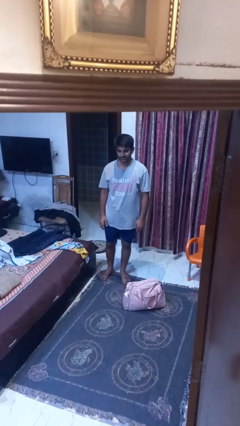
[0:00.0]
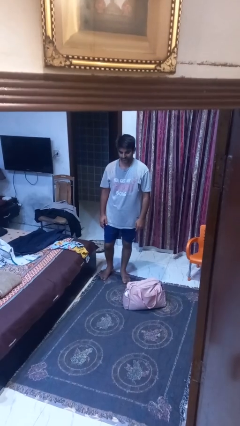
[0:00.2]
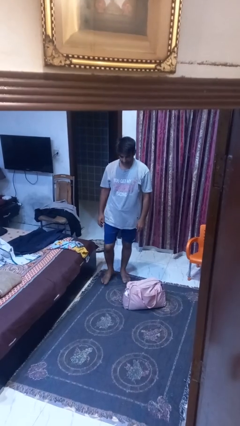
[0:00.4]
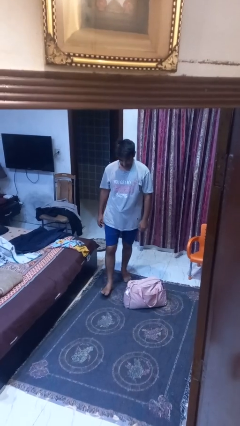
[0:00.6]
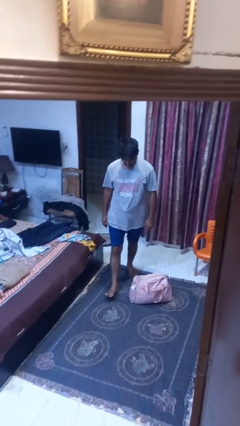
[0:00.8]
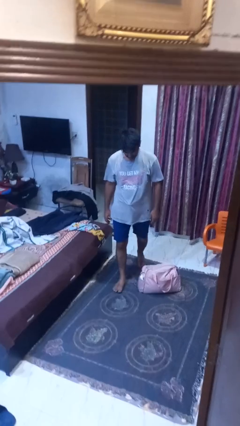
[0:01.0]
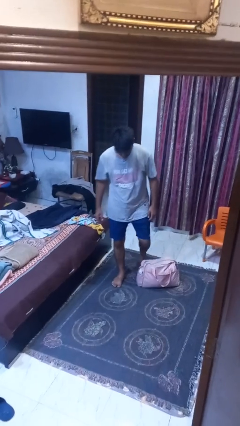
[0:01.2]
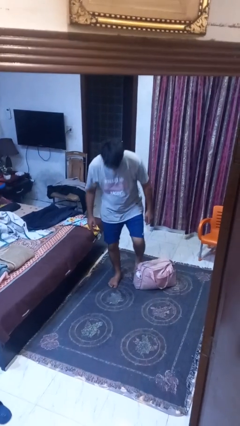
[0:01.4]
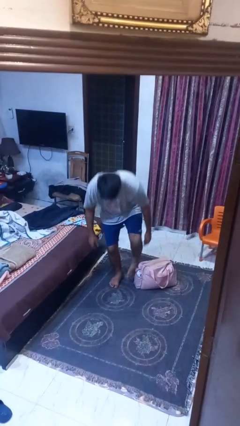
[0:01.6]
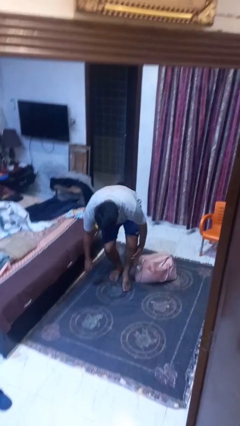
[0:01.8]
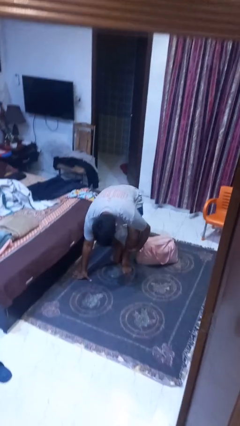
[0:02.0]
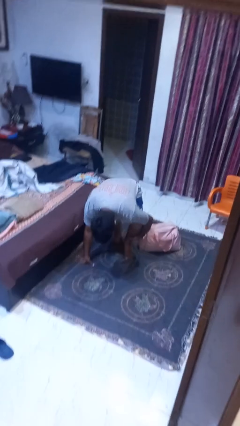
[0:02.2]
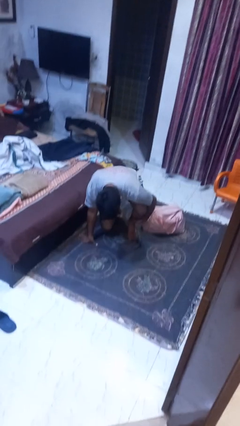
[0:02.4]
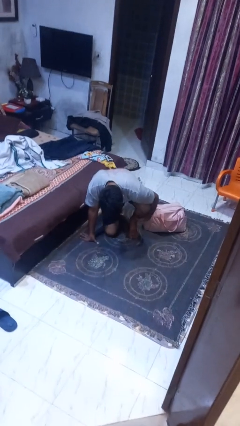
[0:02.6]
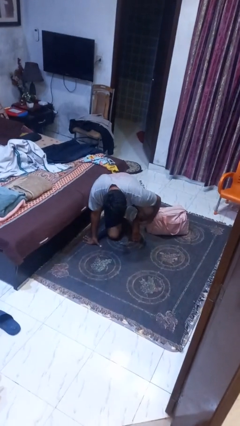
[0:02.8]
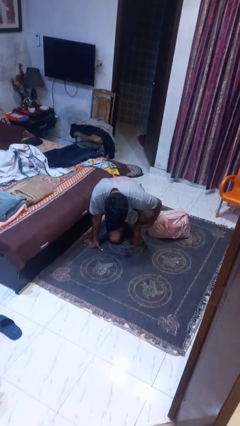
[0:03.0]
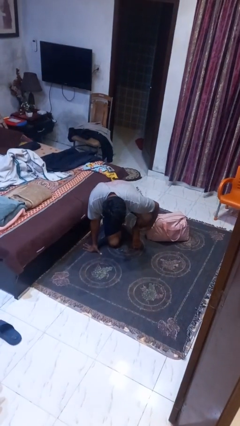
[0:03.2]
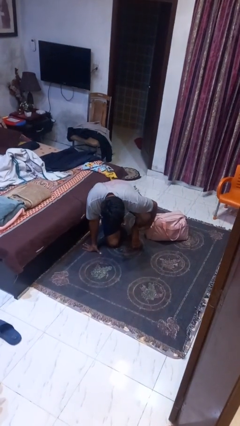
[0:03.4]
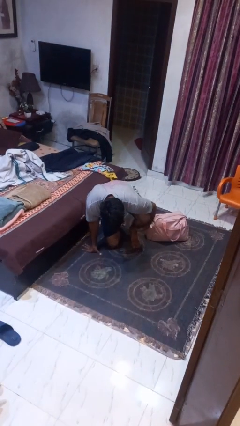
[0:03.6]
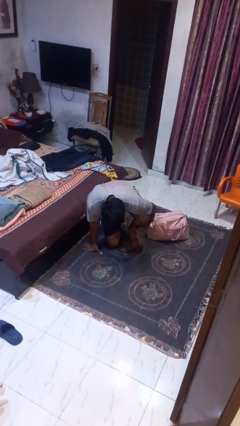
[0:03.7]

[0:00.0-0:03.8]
person trips on object on floor

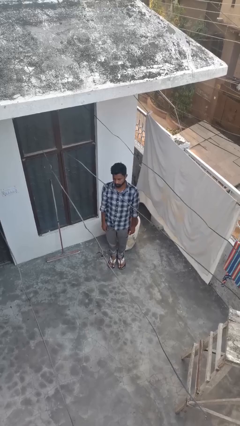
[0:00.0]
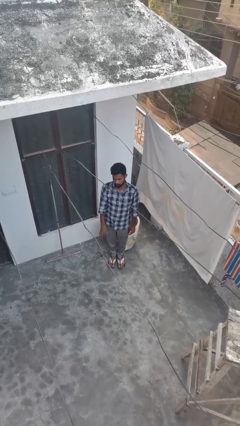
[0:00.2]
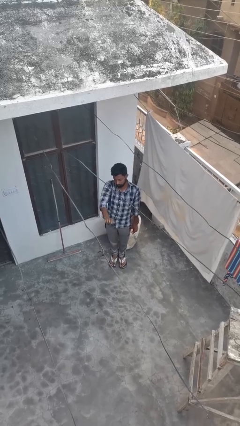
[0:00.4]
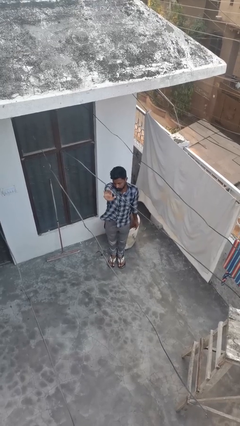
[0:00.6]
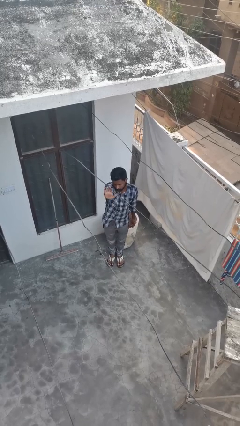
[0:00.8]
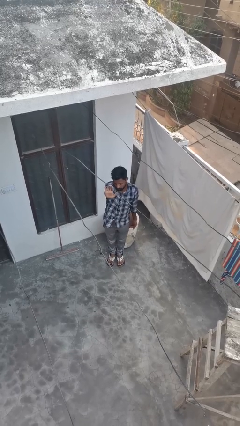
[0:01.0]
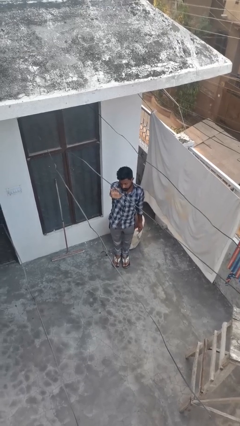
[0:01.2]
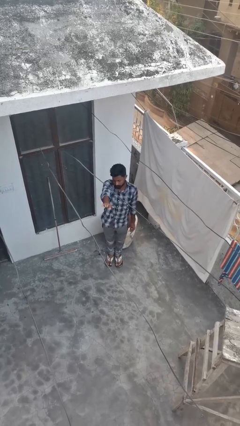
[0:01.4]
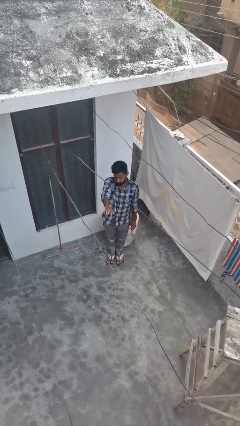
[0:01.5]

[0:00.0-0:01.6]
person gestures stop

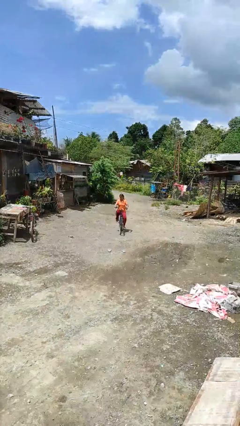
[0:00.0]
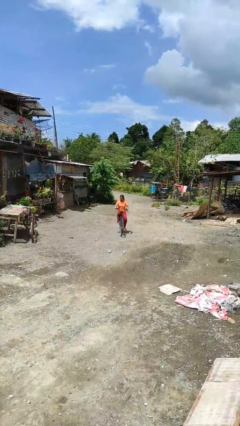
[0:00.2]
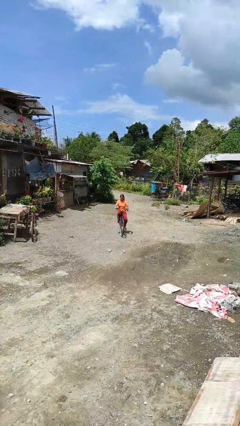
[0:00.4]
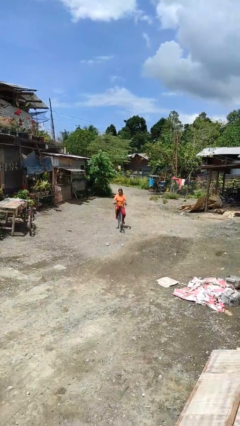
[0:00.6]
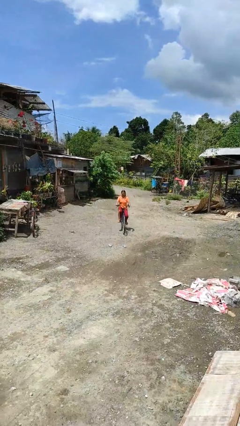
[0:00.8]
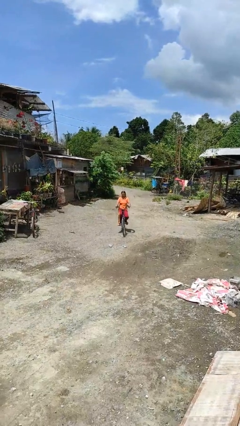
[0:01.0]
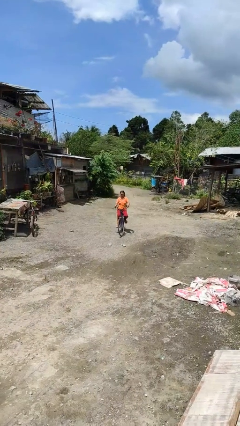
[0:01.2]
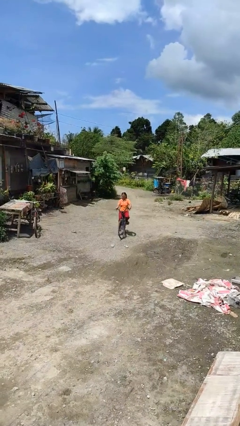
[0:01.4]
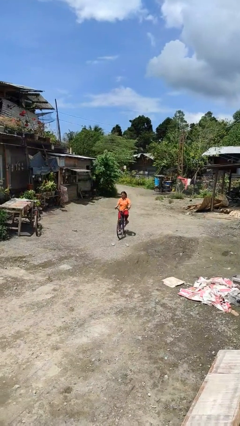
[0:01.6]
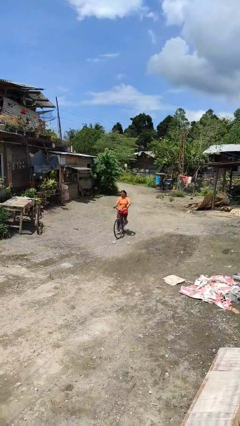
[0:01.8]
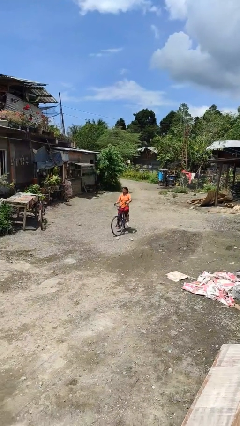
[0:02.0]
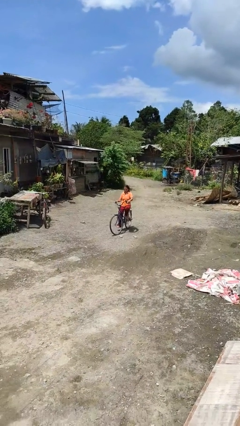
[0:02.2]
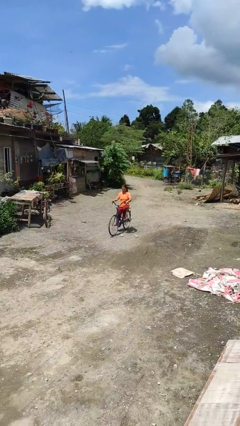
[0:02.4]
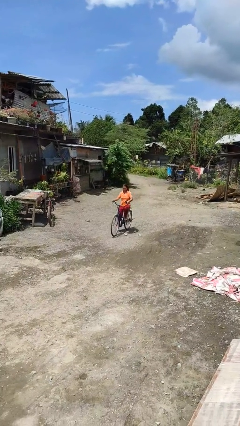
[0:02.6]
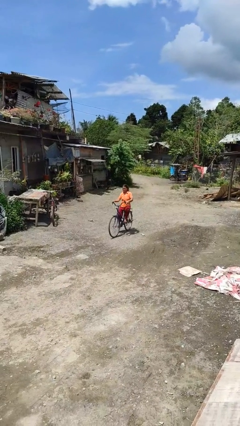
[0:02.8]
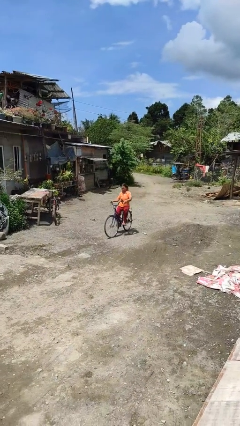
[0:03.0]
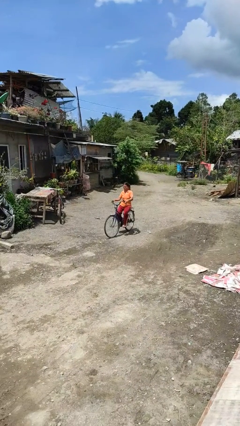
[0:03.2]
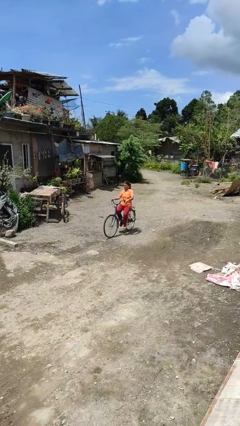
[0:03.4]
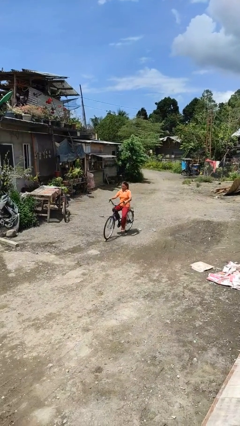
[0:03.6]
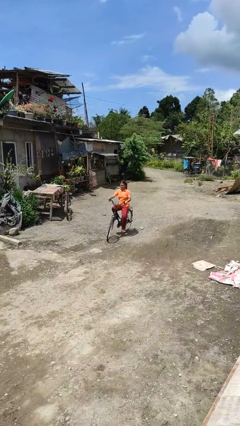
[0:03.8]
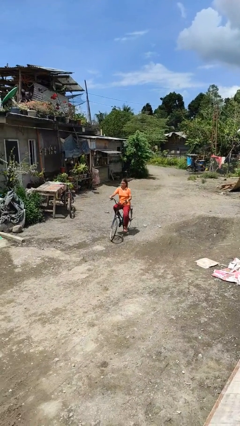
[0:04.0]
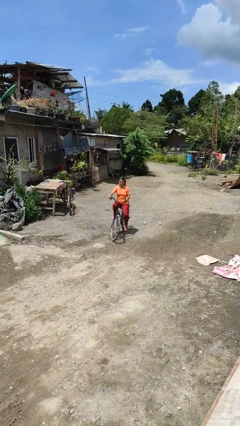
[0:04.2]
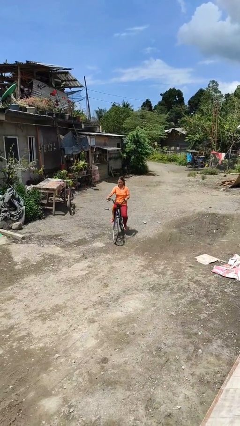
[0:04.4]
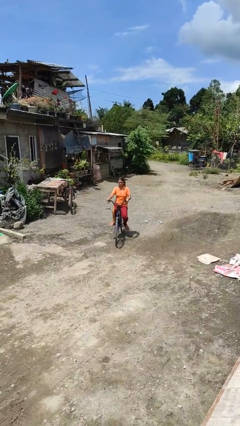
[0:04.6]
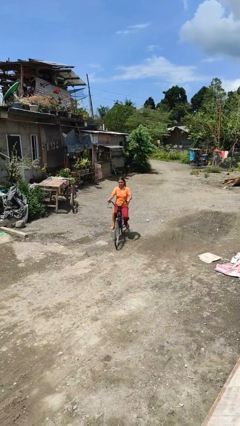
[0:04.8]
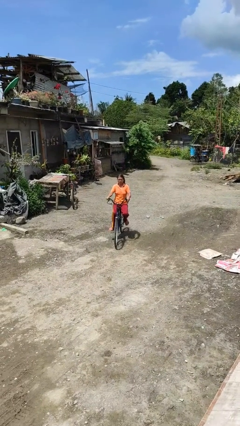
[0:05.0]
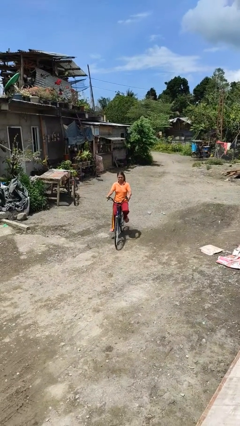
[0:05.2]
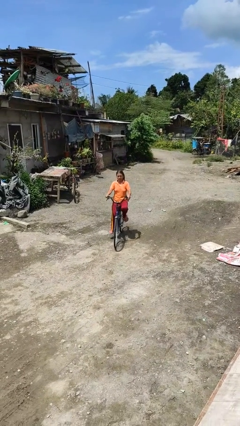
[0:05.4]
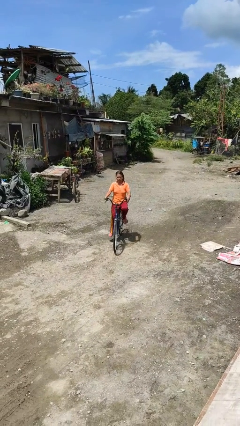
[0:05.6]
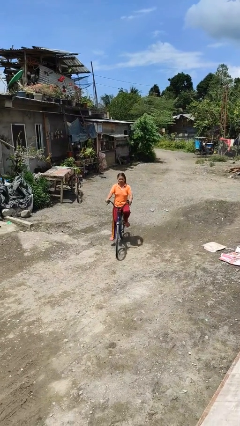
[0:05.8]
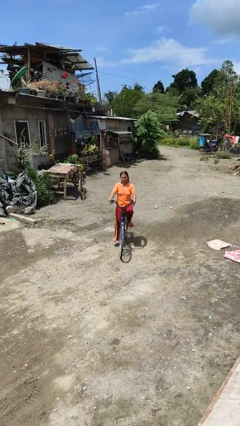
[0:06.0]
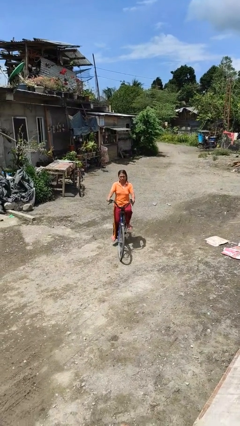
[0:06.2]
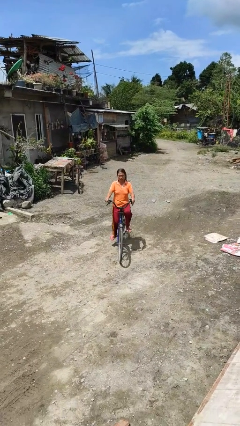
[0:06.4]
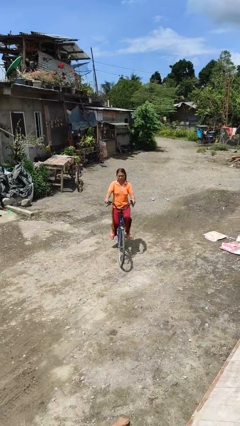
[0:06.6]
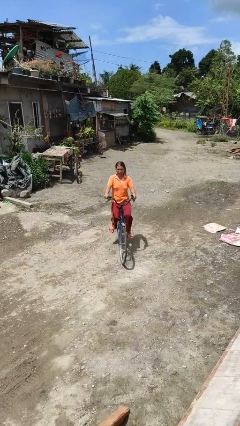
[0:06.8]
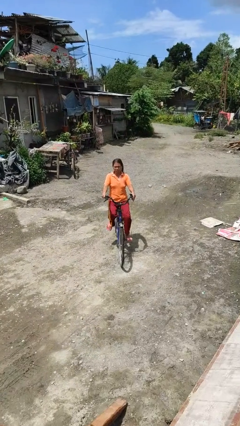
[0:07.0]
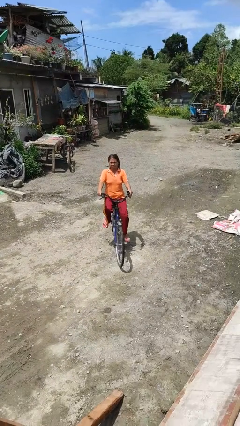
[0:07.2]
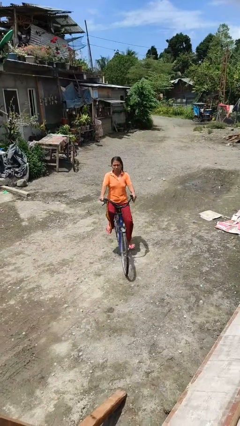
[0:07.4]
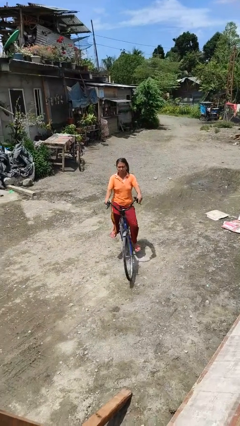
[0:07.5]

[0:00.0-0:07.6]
person rides bicycle

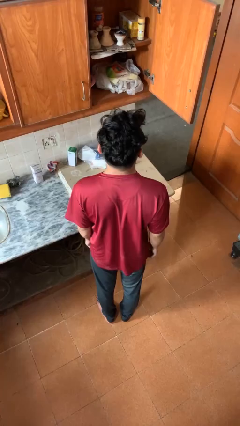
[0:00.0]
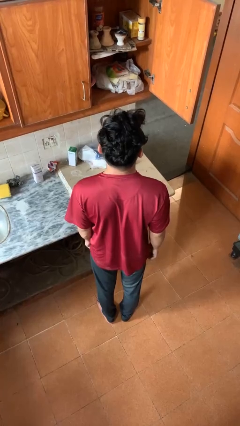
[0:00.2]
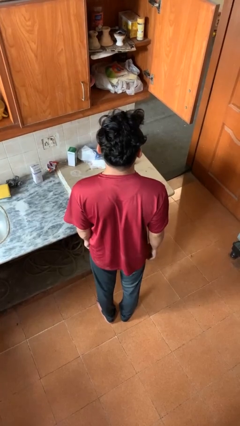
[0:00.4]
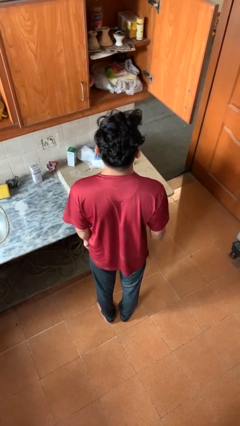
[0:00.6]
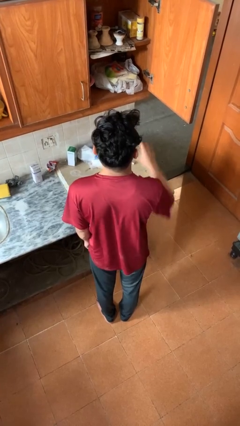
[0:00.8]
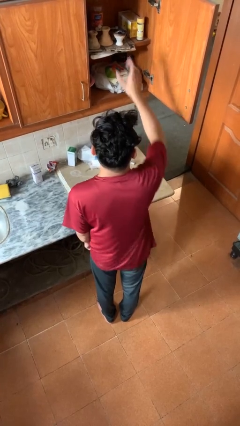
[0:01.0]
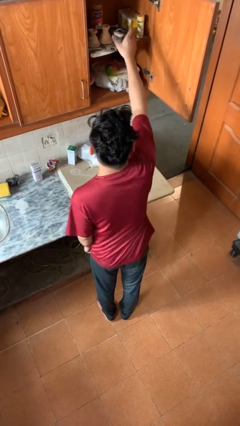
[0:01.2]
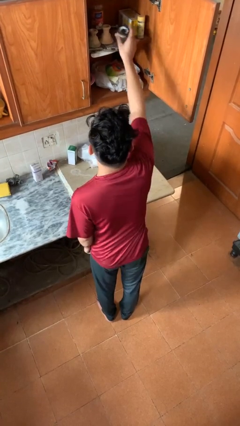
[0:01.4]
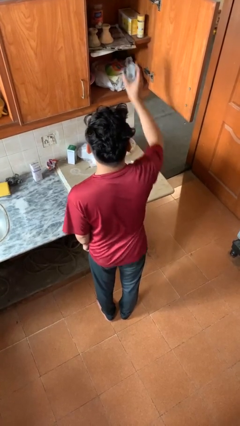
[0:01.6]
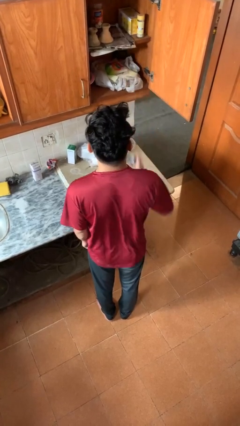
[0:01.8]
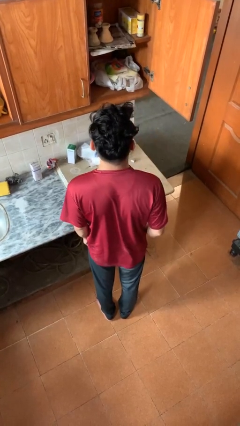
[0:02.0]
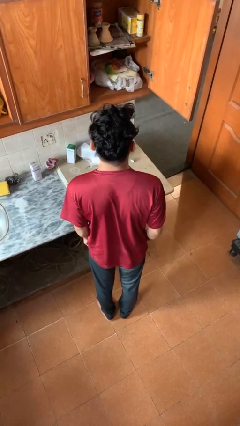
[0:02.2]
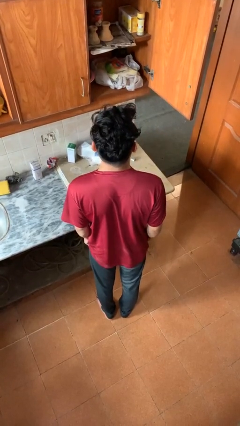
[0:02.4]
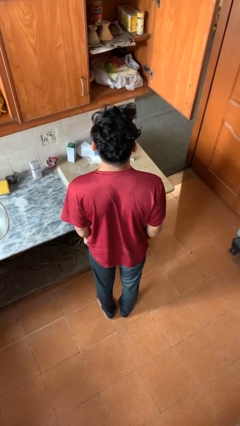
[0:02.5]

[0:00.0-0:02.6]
person takes object from cabinet

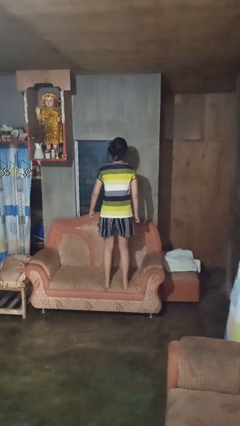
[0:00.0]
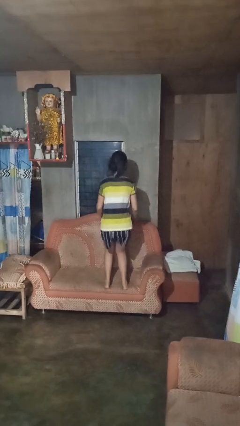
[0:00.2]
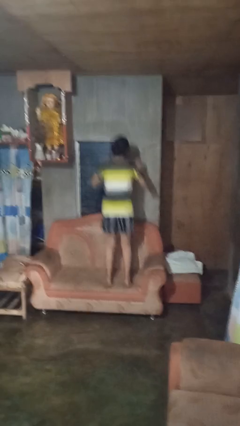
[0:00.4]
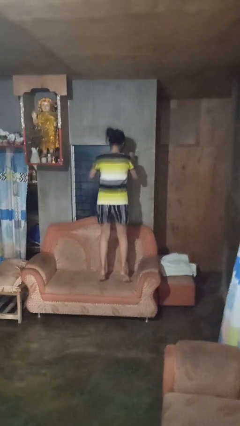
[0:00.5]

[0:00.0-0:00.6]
person jumps on couch

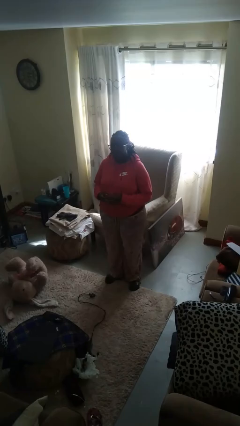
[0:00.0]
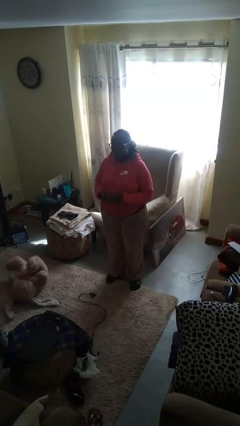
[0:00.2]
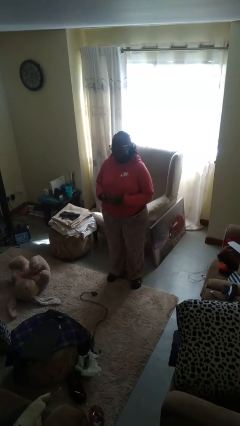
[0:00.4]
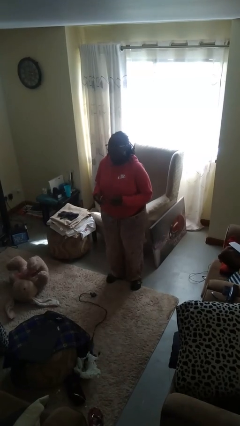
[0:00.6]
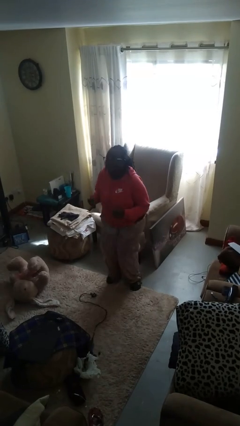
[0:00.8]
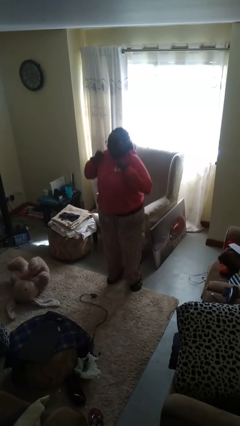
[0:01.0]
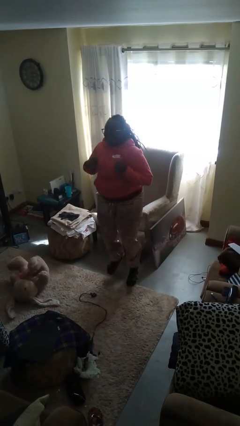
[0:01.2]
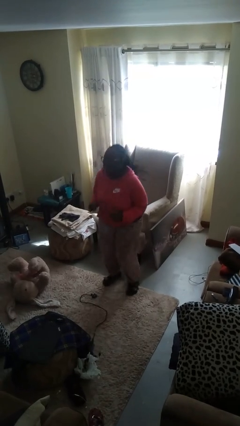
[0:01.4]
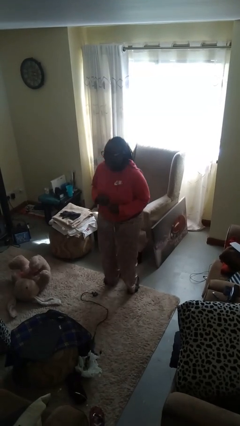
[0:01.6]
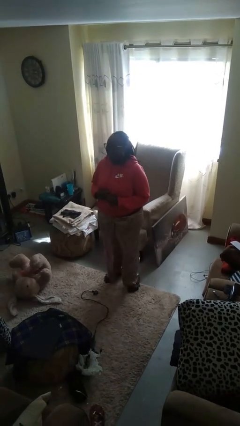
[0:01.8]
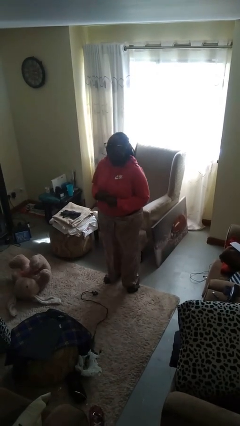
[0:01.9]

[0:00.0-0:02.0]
person jumps
